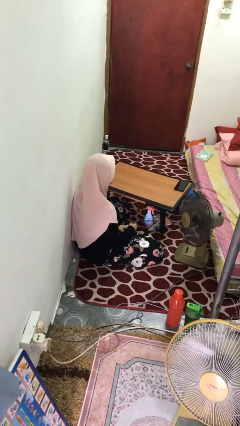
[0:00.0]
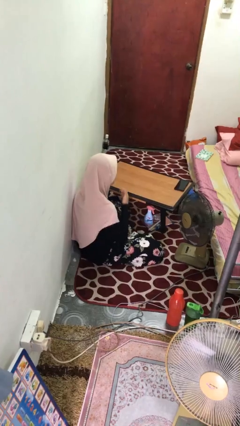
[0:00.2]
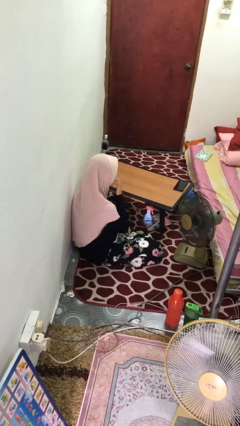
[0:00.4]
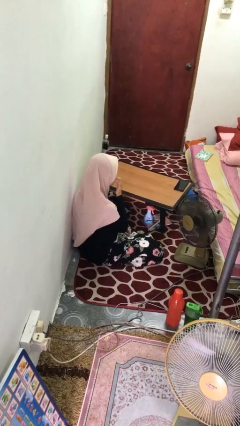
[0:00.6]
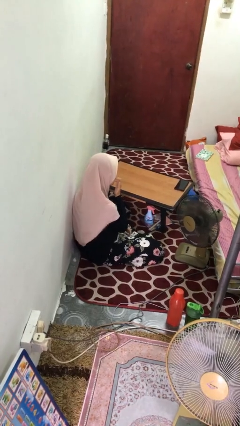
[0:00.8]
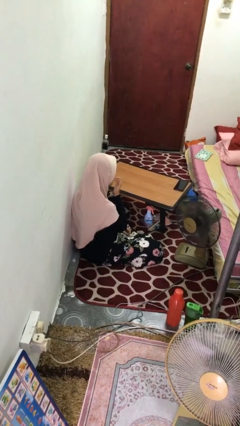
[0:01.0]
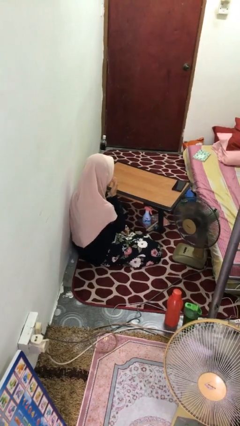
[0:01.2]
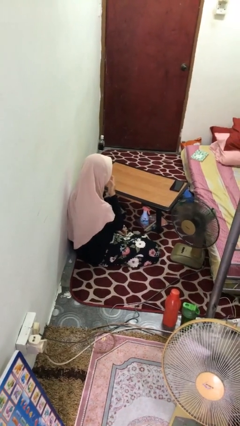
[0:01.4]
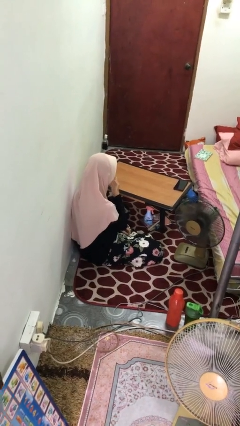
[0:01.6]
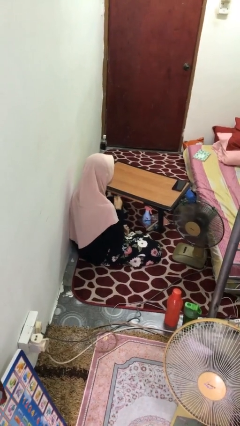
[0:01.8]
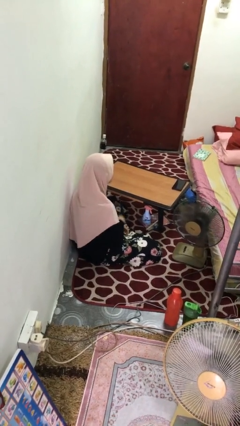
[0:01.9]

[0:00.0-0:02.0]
person licks fingers

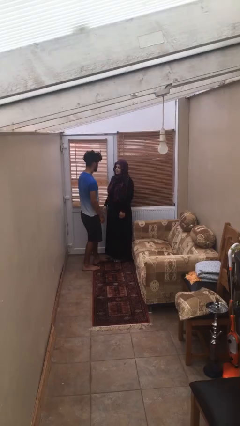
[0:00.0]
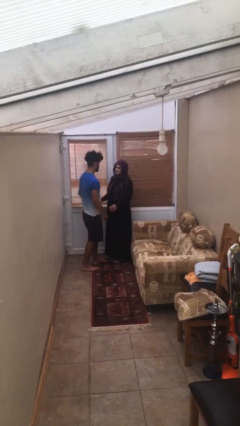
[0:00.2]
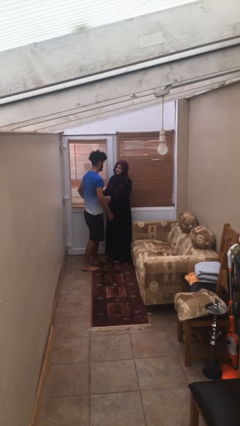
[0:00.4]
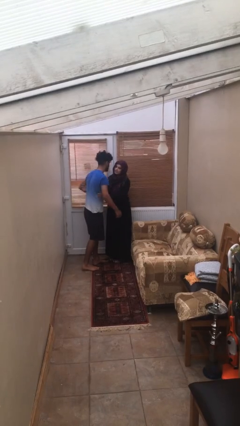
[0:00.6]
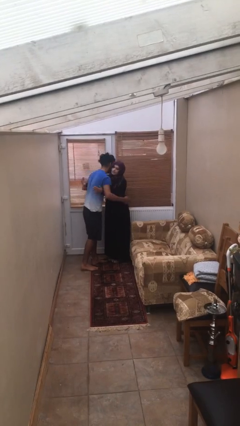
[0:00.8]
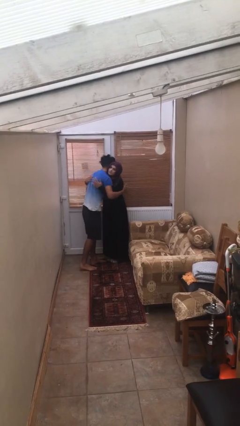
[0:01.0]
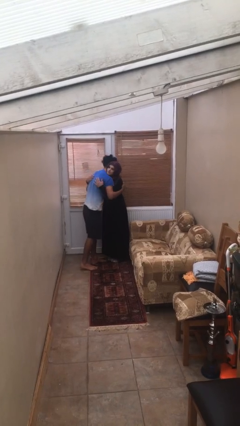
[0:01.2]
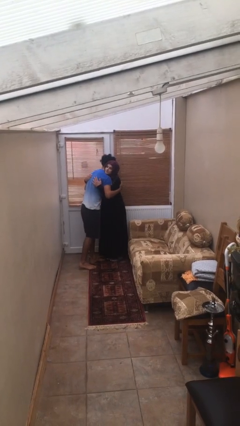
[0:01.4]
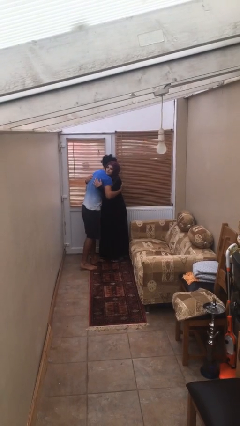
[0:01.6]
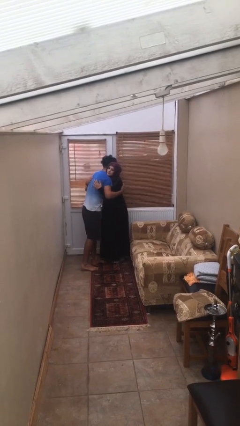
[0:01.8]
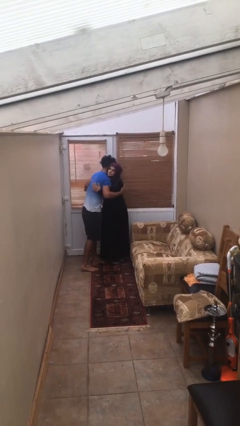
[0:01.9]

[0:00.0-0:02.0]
person embraces person

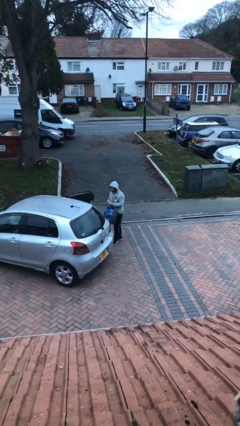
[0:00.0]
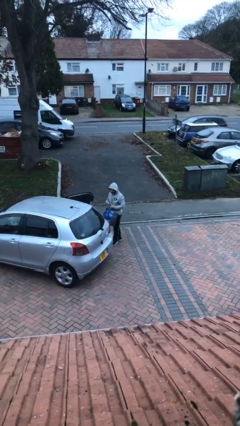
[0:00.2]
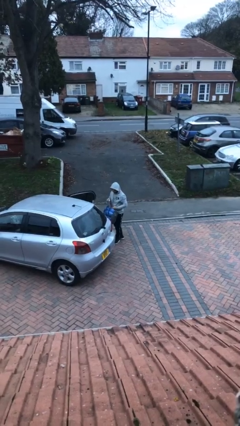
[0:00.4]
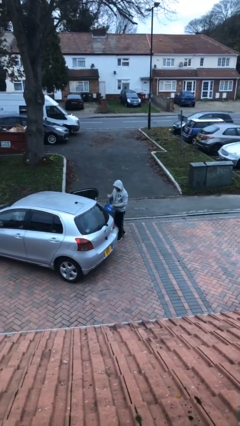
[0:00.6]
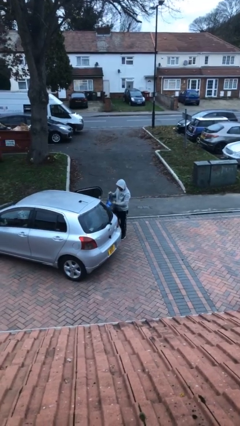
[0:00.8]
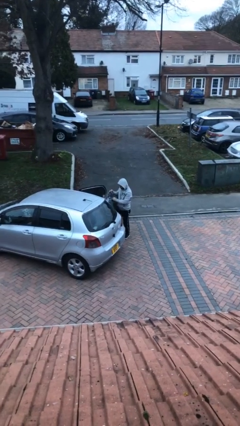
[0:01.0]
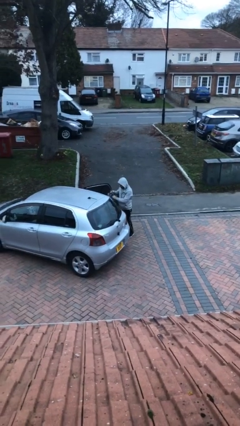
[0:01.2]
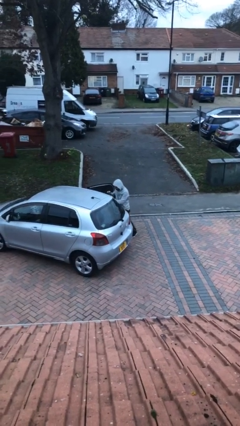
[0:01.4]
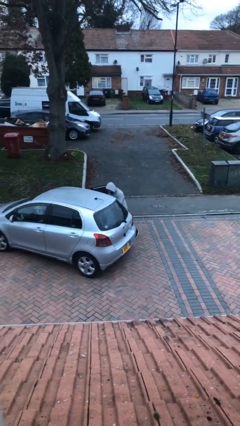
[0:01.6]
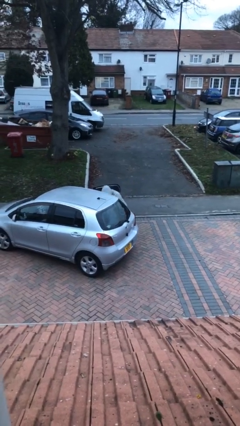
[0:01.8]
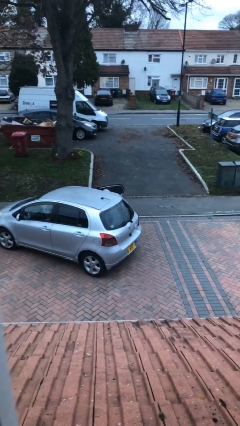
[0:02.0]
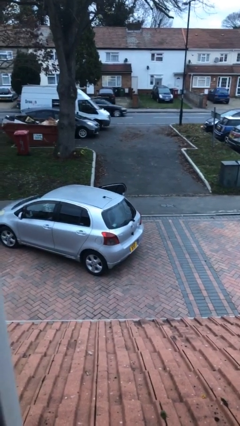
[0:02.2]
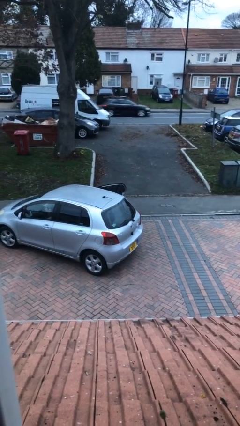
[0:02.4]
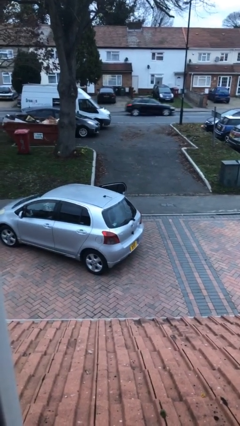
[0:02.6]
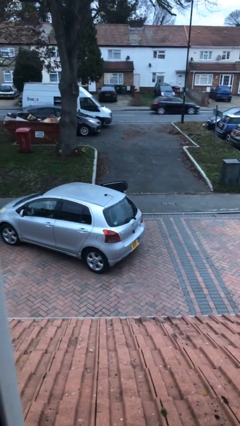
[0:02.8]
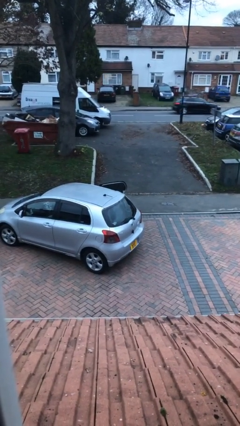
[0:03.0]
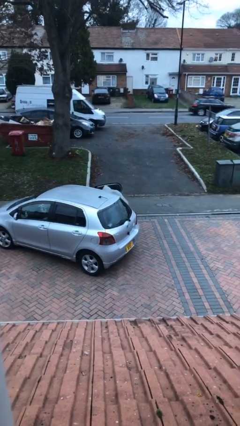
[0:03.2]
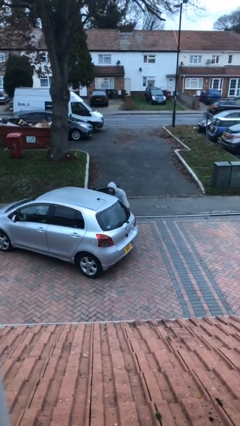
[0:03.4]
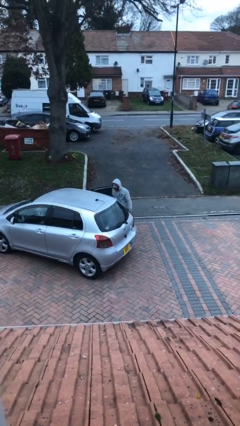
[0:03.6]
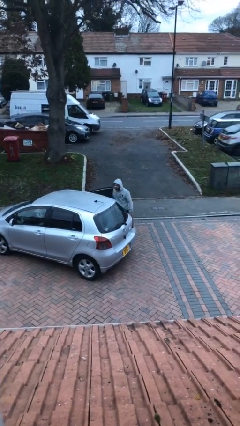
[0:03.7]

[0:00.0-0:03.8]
person loads car

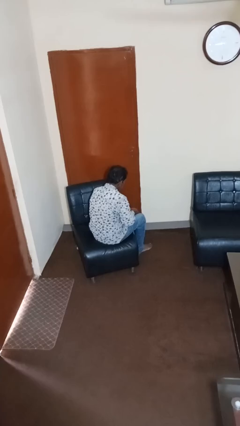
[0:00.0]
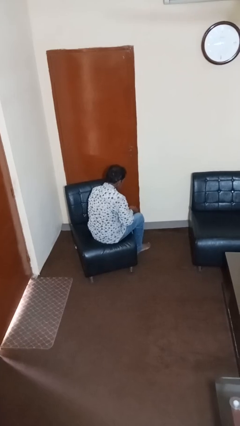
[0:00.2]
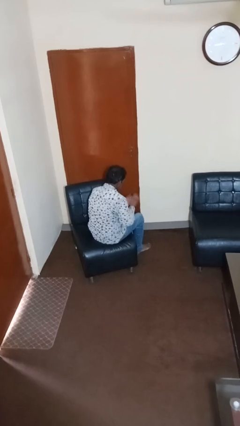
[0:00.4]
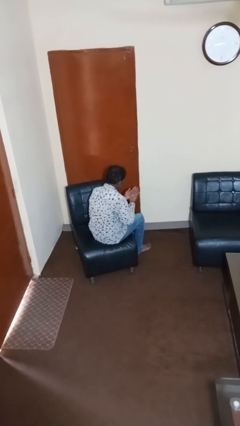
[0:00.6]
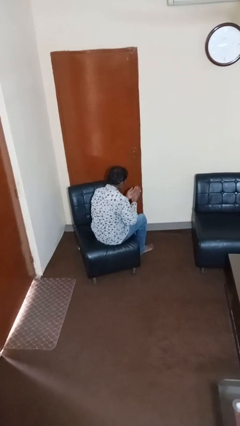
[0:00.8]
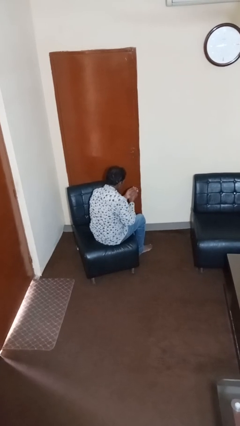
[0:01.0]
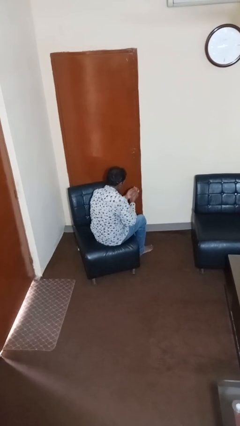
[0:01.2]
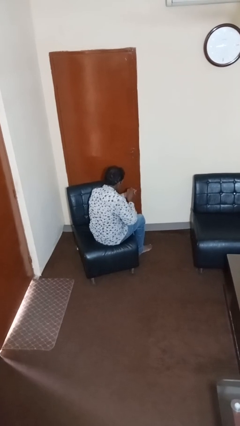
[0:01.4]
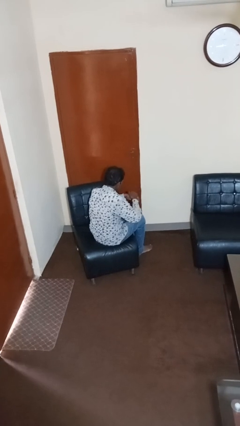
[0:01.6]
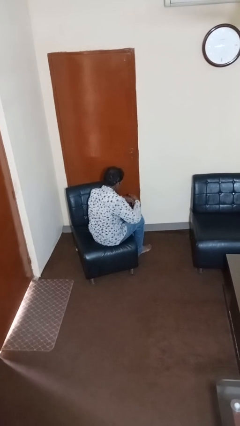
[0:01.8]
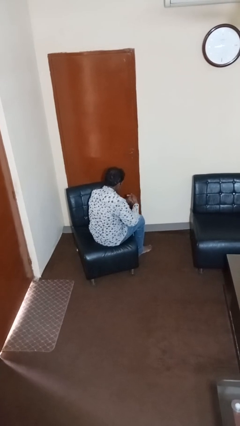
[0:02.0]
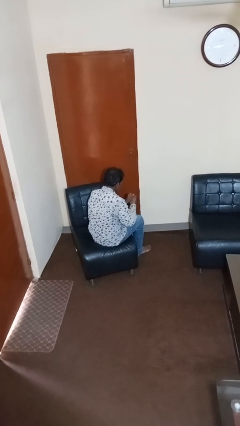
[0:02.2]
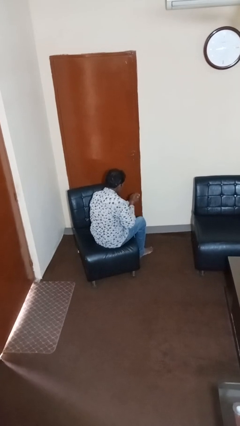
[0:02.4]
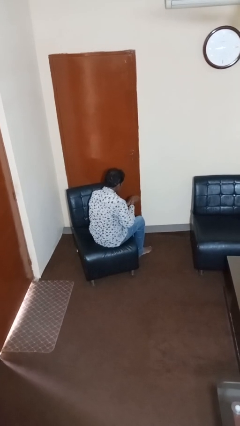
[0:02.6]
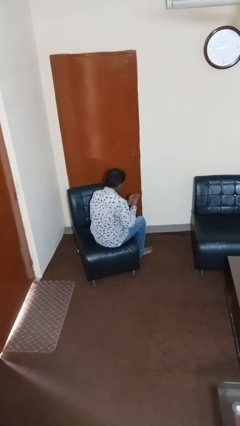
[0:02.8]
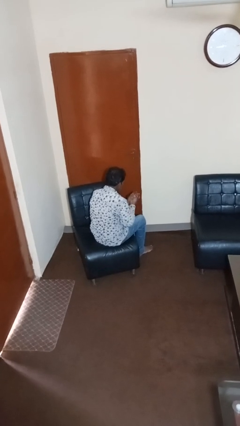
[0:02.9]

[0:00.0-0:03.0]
person looks at hands in lap

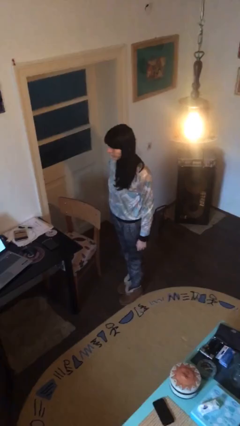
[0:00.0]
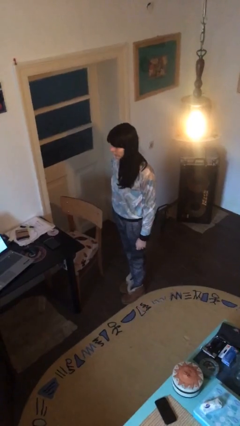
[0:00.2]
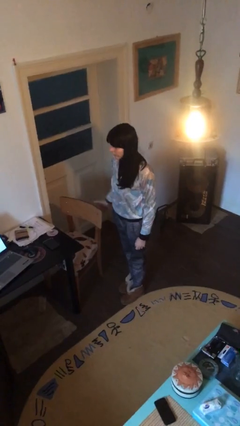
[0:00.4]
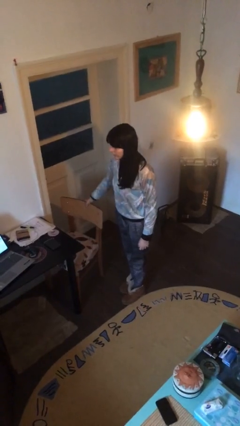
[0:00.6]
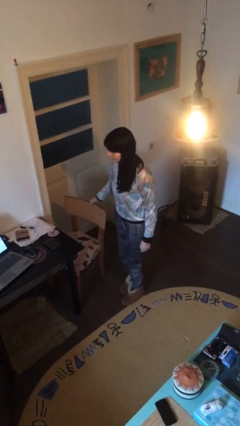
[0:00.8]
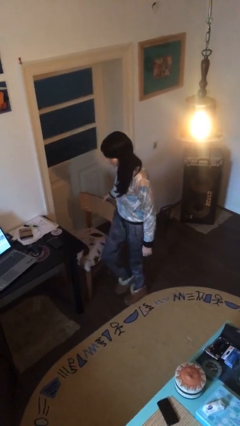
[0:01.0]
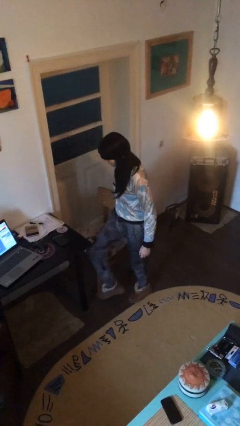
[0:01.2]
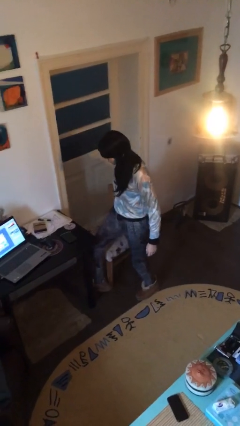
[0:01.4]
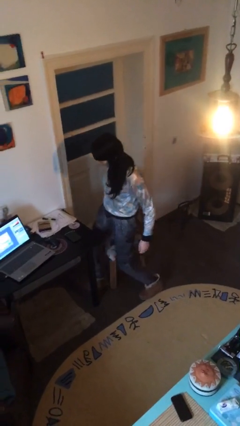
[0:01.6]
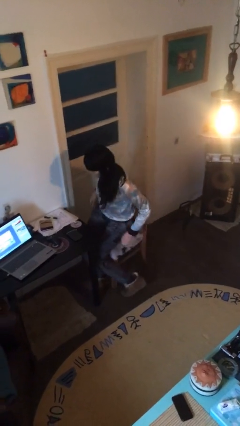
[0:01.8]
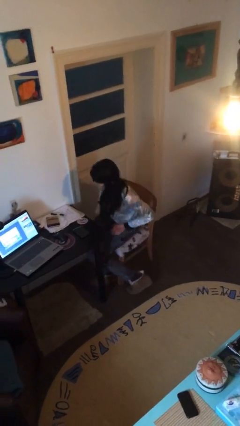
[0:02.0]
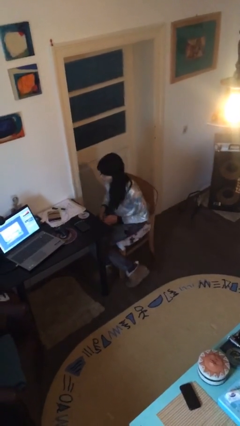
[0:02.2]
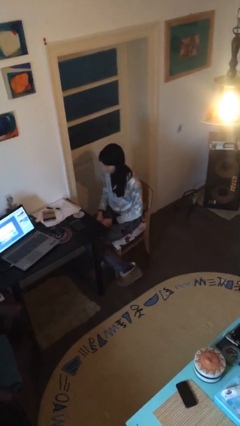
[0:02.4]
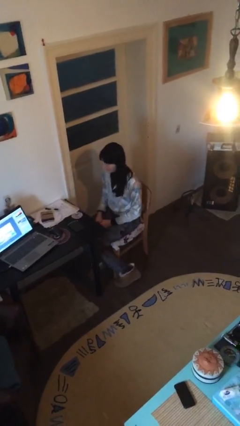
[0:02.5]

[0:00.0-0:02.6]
person sits down

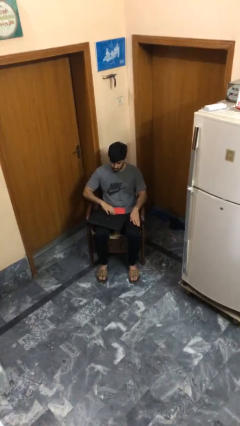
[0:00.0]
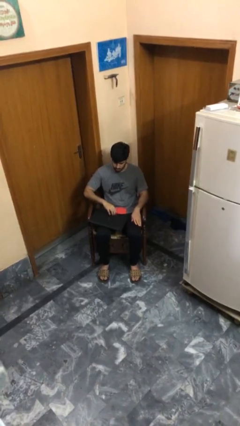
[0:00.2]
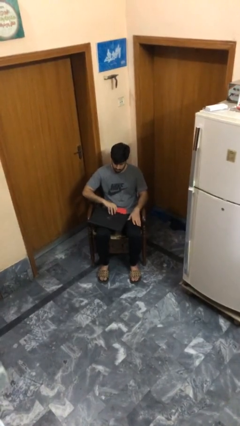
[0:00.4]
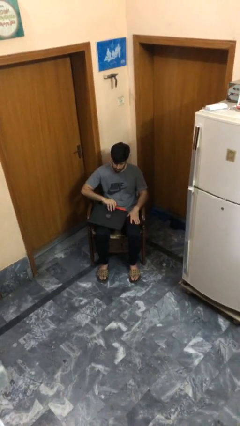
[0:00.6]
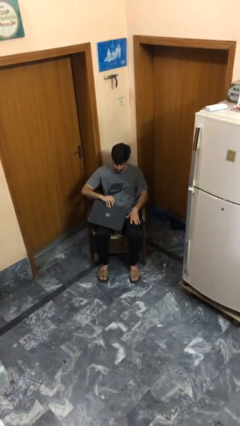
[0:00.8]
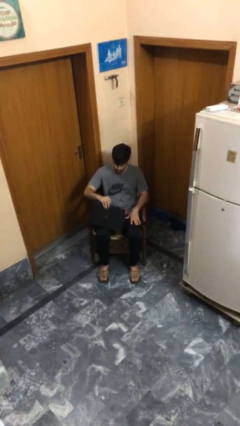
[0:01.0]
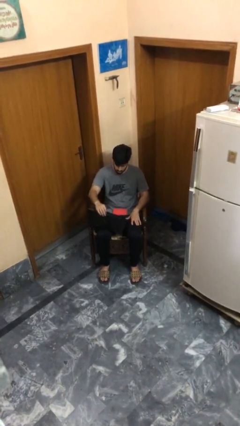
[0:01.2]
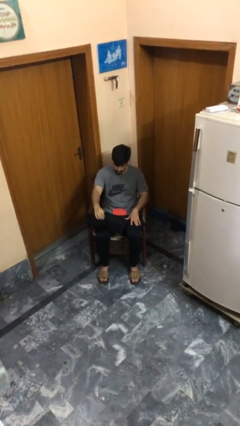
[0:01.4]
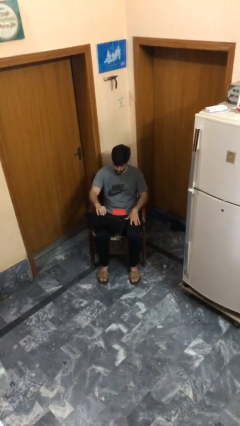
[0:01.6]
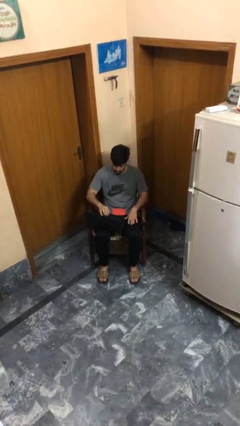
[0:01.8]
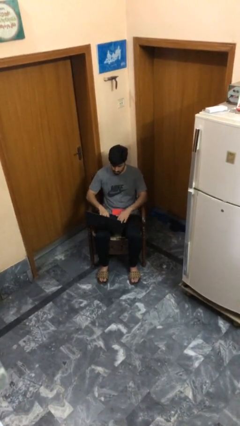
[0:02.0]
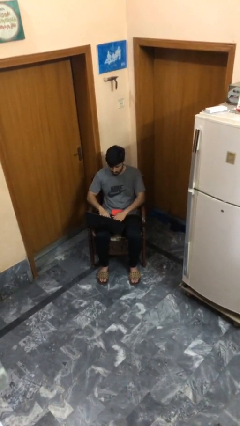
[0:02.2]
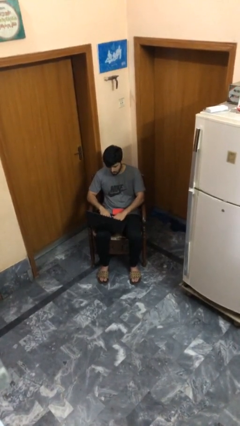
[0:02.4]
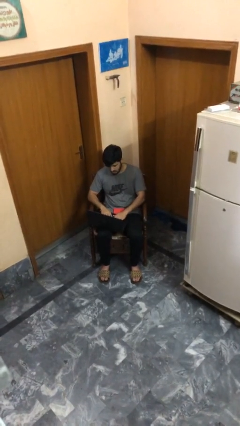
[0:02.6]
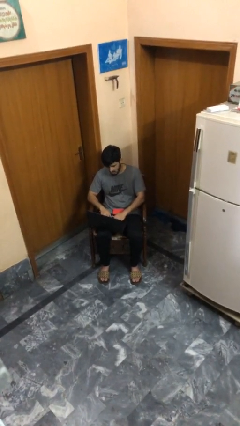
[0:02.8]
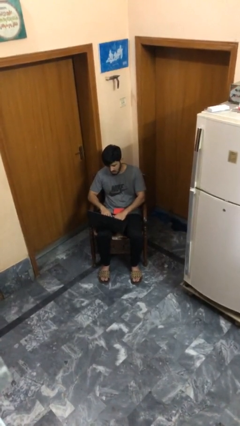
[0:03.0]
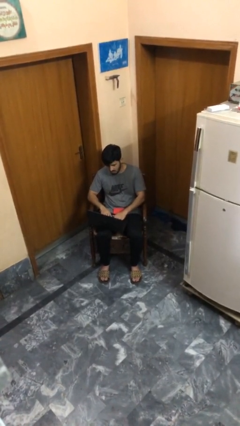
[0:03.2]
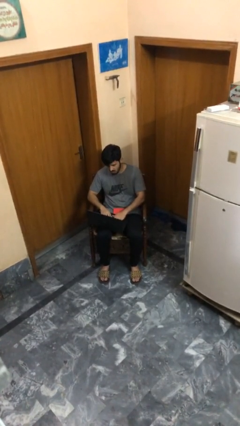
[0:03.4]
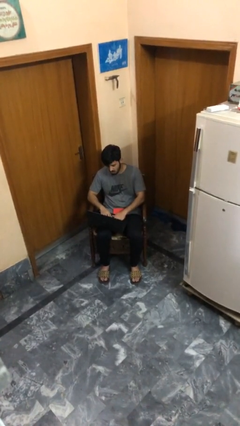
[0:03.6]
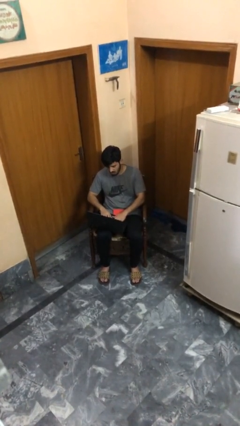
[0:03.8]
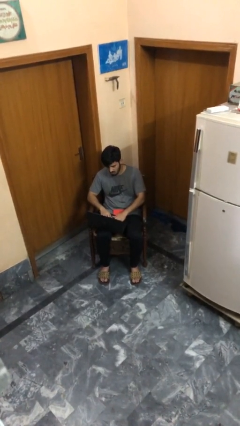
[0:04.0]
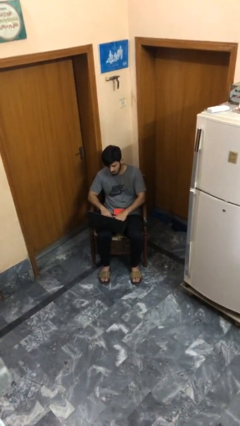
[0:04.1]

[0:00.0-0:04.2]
person opens laptop
